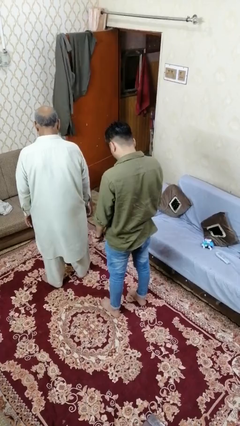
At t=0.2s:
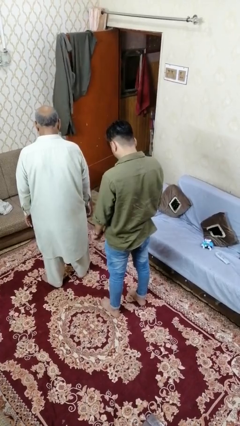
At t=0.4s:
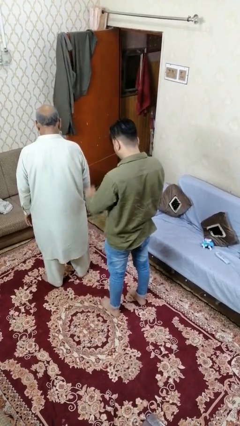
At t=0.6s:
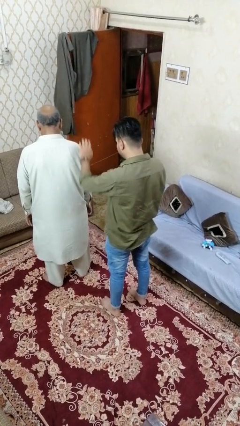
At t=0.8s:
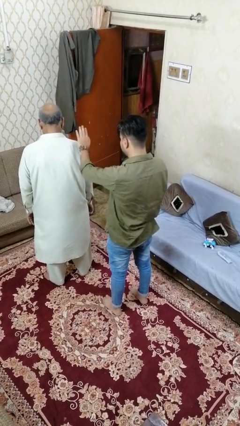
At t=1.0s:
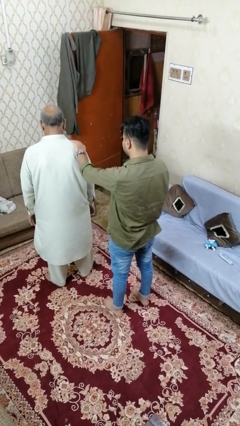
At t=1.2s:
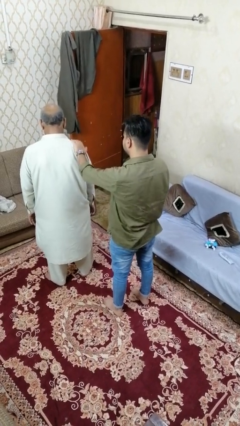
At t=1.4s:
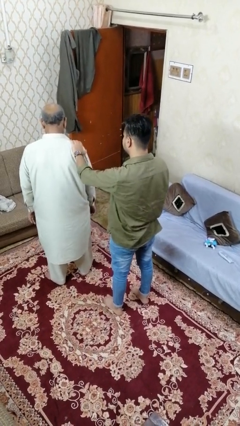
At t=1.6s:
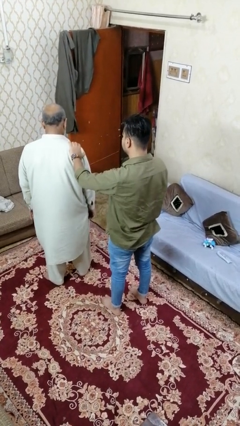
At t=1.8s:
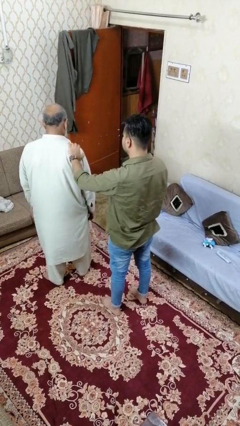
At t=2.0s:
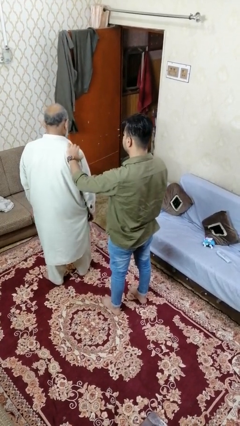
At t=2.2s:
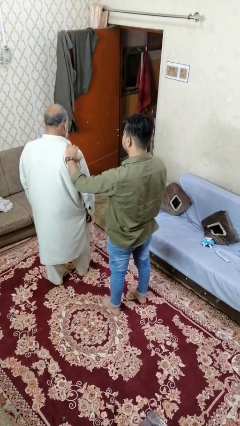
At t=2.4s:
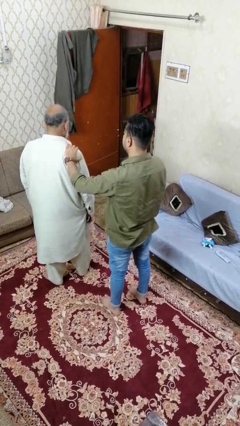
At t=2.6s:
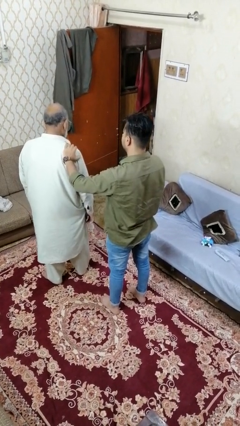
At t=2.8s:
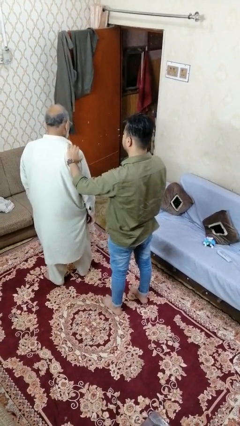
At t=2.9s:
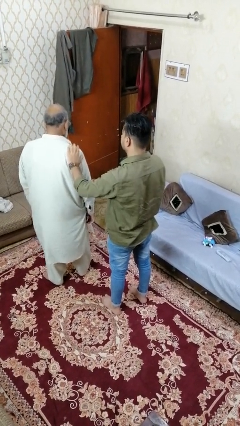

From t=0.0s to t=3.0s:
person touches back of person

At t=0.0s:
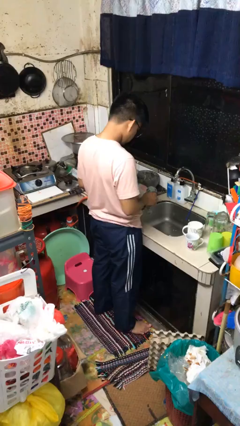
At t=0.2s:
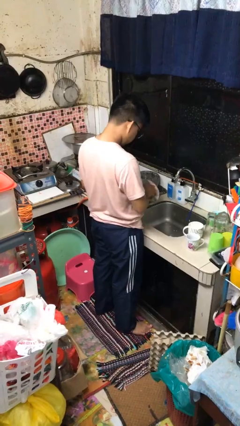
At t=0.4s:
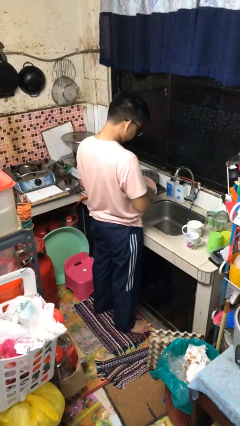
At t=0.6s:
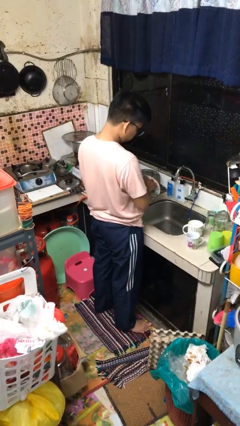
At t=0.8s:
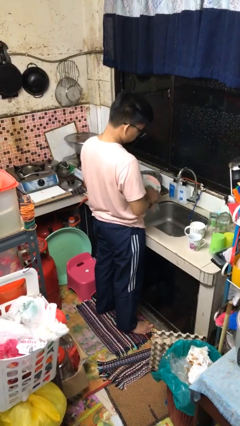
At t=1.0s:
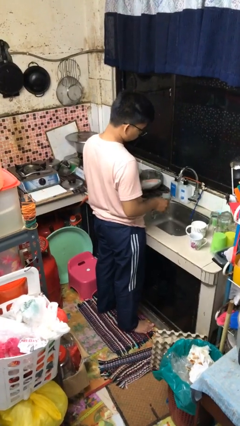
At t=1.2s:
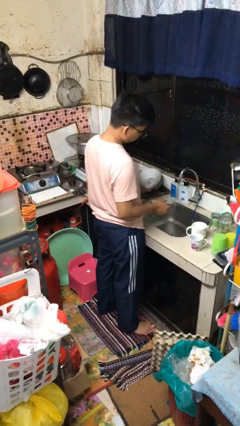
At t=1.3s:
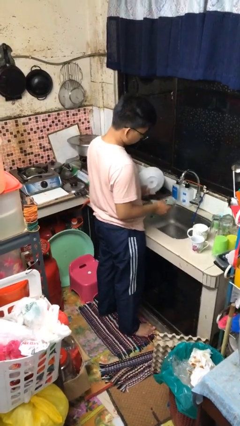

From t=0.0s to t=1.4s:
person dries dish

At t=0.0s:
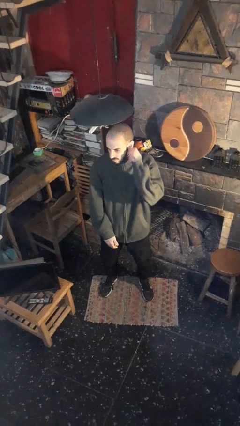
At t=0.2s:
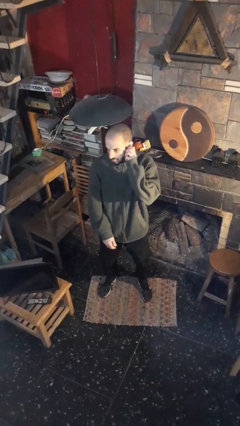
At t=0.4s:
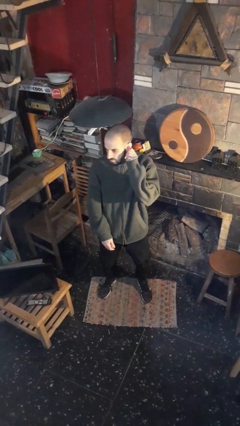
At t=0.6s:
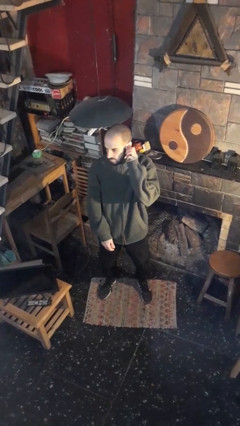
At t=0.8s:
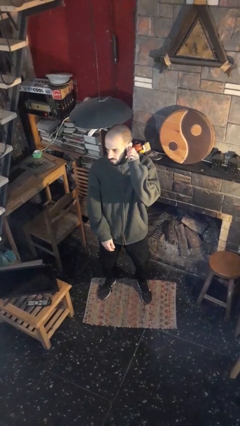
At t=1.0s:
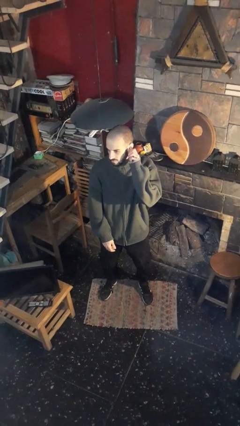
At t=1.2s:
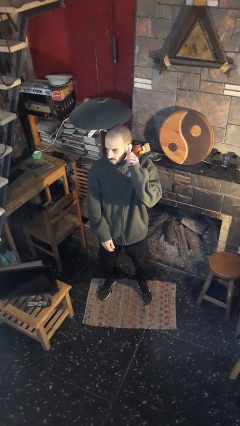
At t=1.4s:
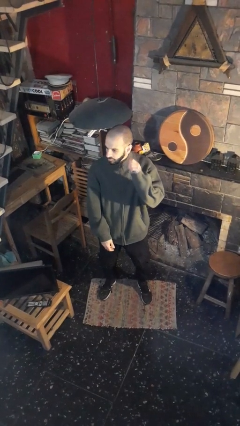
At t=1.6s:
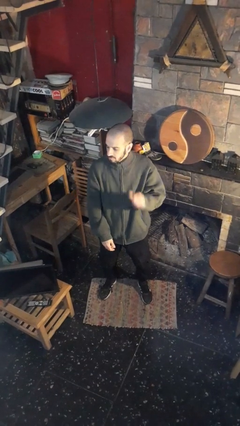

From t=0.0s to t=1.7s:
person touches earlobe

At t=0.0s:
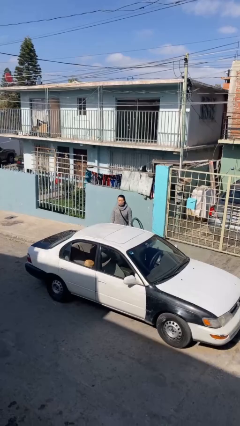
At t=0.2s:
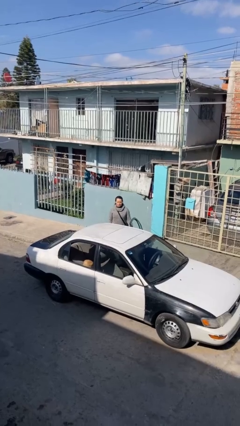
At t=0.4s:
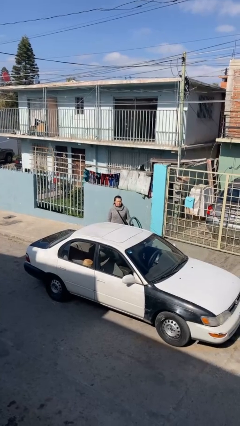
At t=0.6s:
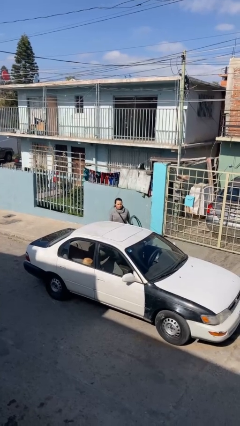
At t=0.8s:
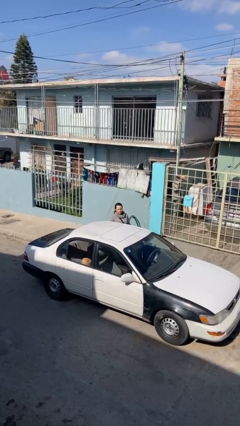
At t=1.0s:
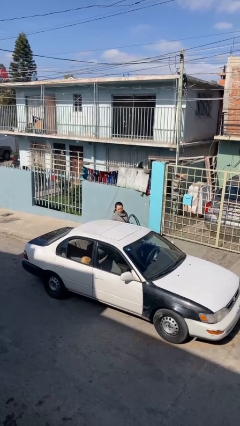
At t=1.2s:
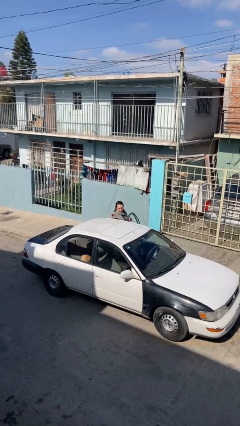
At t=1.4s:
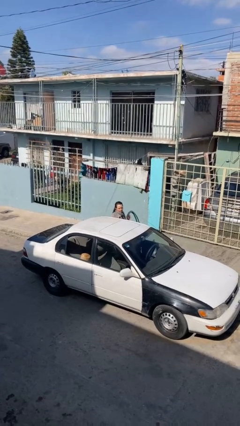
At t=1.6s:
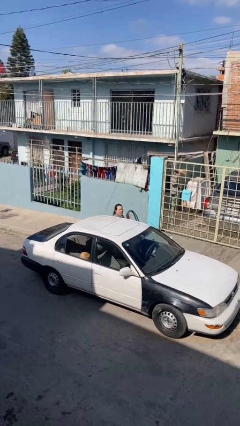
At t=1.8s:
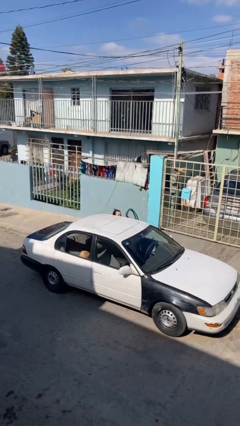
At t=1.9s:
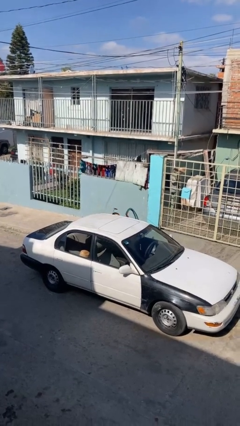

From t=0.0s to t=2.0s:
person enters car

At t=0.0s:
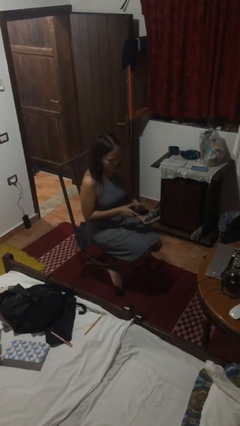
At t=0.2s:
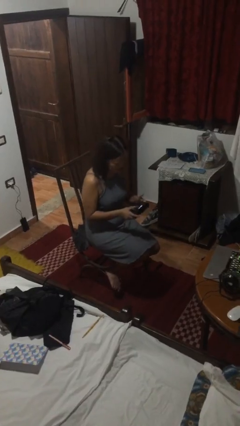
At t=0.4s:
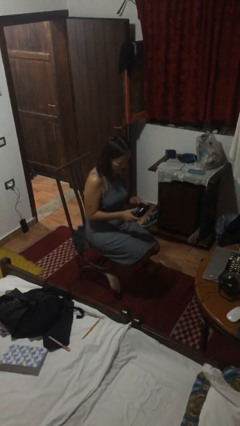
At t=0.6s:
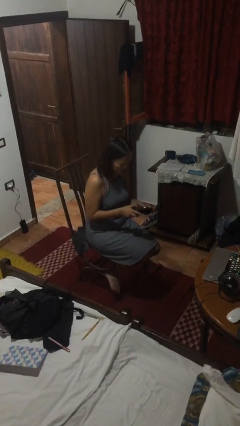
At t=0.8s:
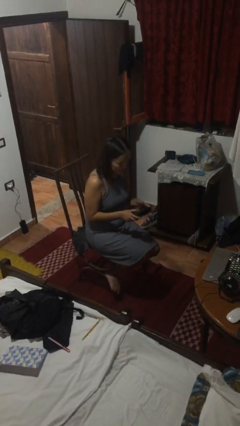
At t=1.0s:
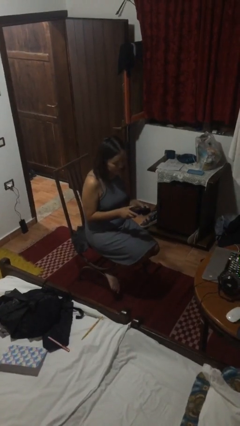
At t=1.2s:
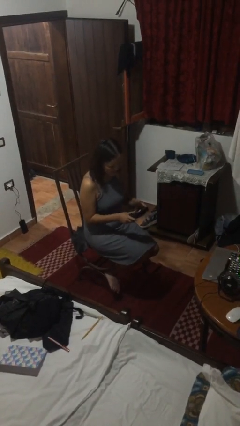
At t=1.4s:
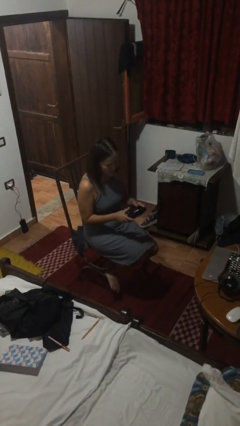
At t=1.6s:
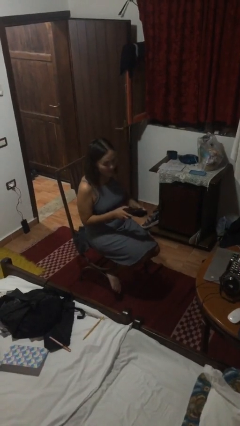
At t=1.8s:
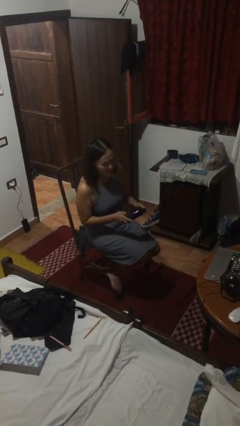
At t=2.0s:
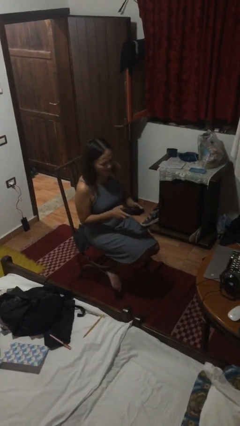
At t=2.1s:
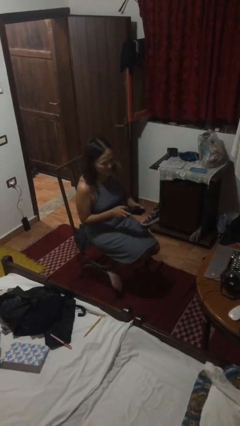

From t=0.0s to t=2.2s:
person interacts with handheld game

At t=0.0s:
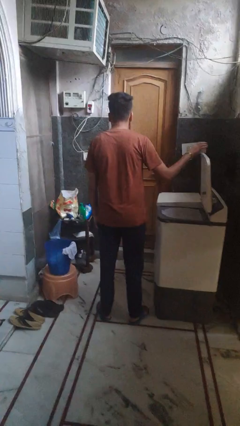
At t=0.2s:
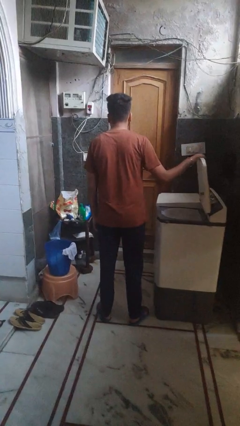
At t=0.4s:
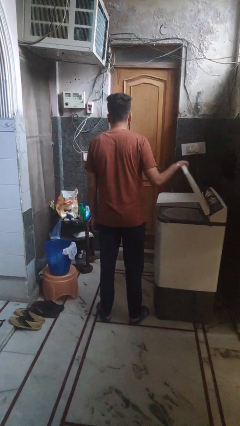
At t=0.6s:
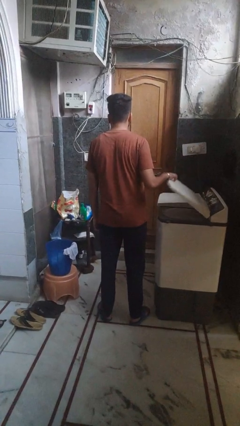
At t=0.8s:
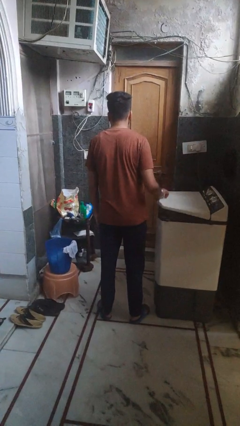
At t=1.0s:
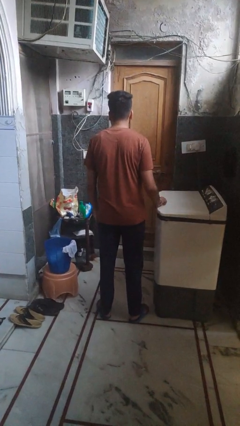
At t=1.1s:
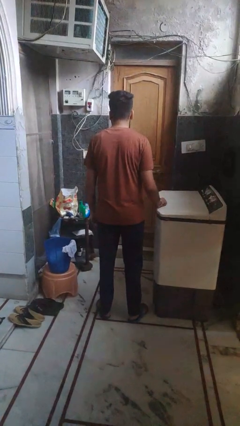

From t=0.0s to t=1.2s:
person closes clothes washer

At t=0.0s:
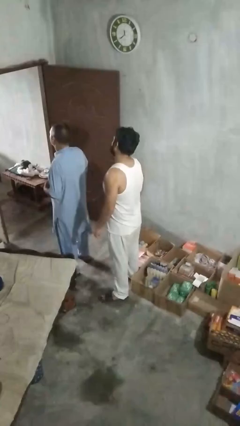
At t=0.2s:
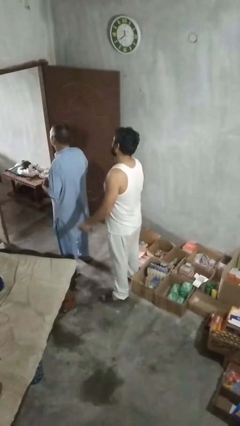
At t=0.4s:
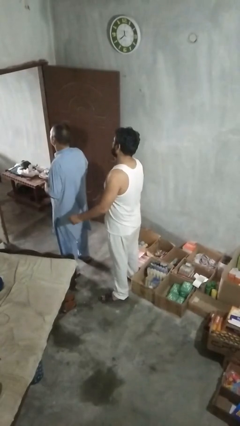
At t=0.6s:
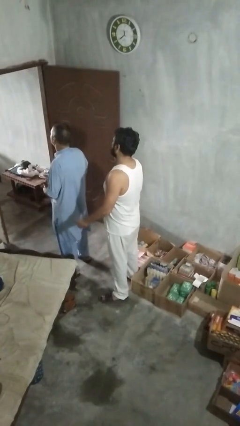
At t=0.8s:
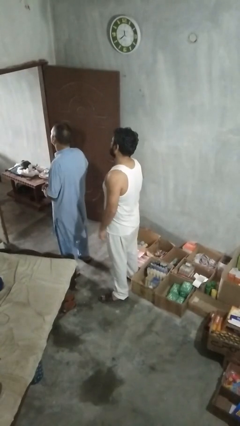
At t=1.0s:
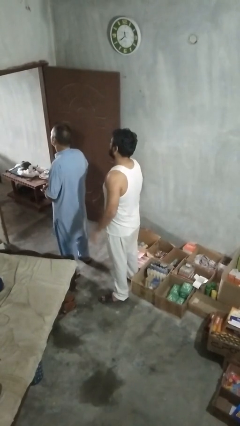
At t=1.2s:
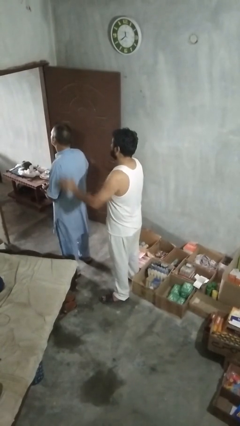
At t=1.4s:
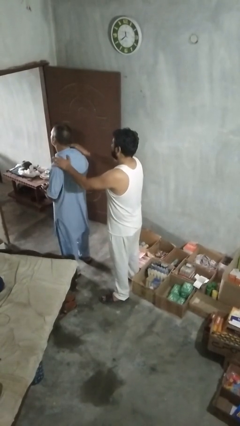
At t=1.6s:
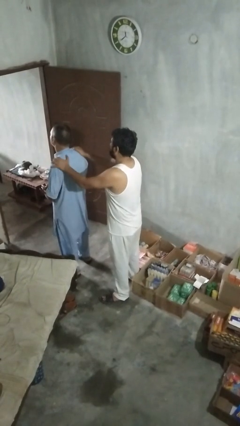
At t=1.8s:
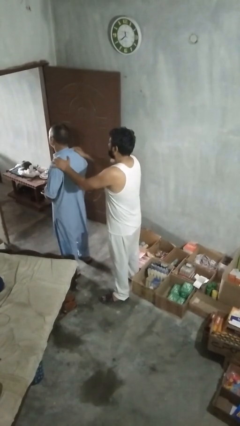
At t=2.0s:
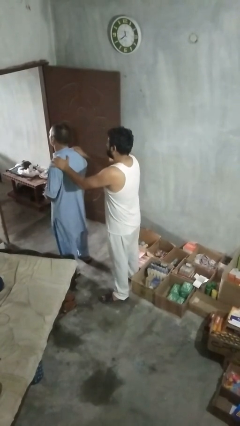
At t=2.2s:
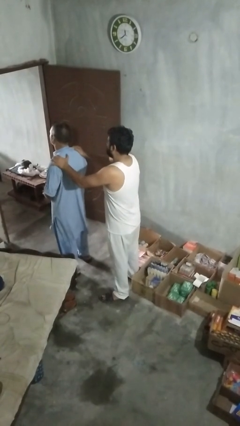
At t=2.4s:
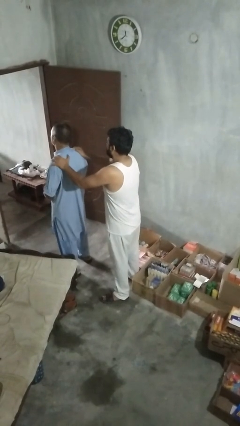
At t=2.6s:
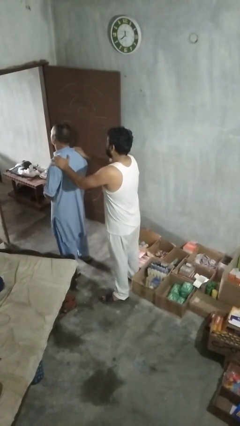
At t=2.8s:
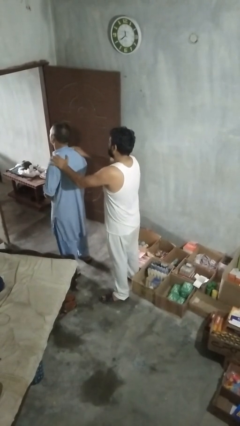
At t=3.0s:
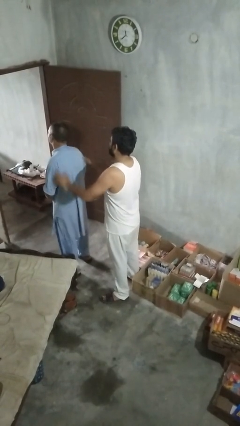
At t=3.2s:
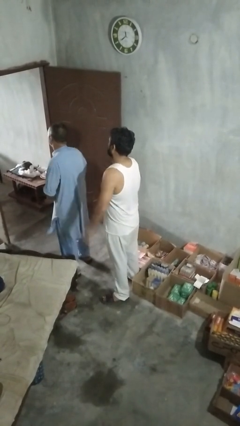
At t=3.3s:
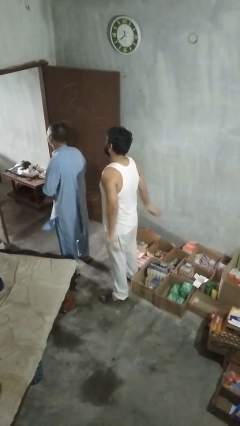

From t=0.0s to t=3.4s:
person pounds shoulders of person

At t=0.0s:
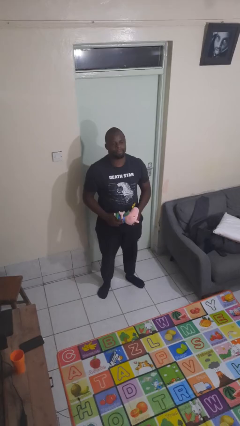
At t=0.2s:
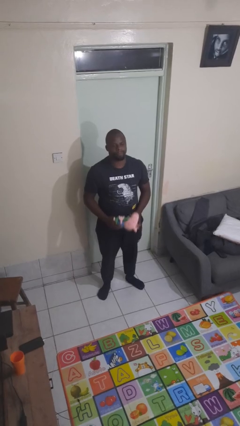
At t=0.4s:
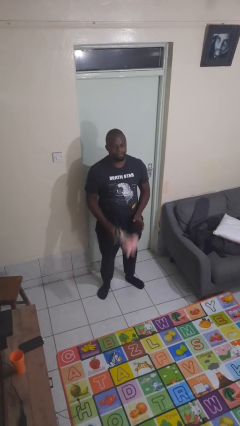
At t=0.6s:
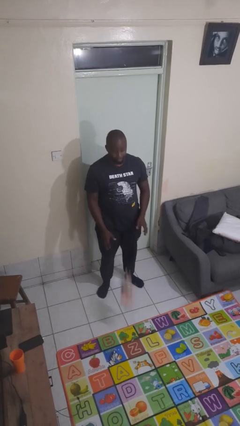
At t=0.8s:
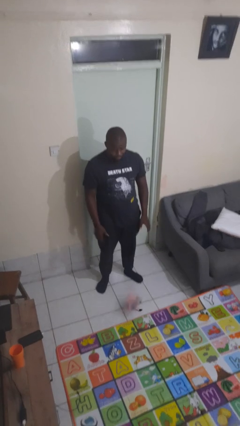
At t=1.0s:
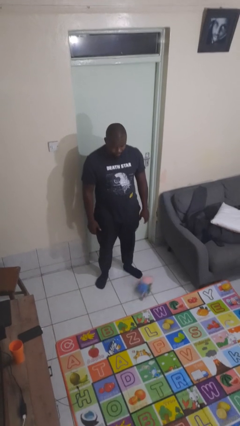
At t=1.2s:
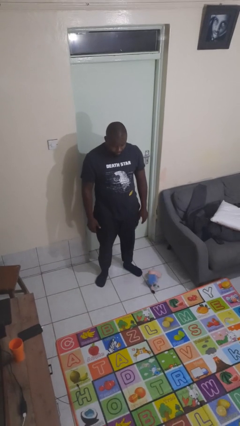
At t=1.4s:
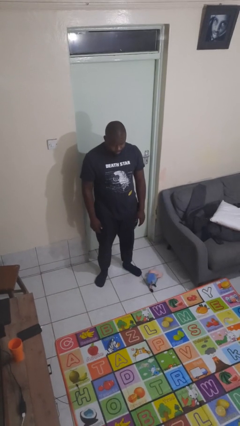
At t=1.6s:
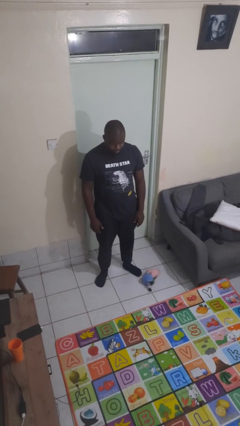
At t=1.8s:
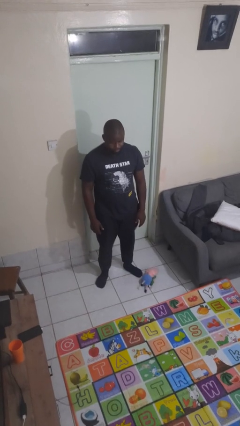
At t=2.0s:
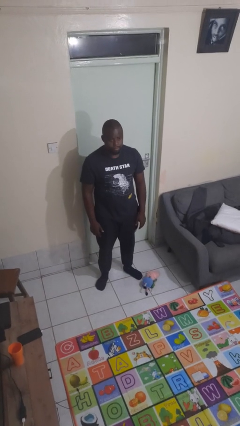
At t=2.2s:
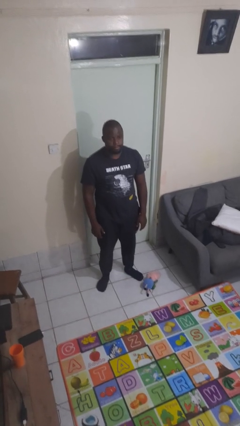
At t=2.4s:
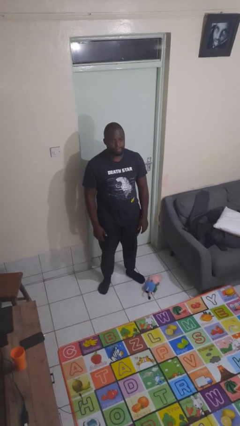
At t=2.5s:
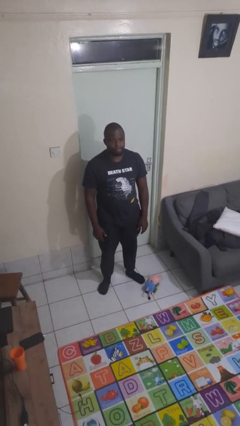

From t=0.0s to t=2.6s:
person drops object
